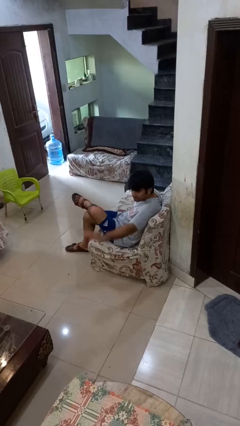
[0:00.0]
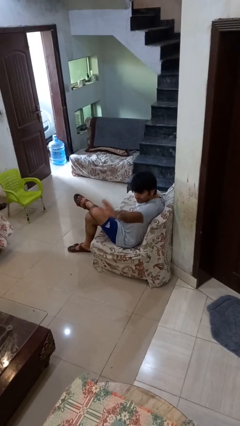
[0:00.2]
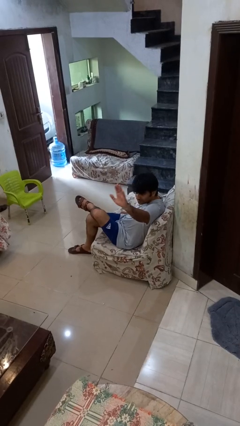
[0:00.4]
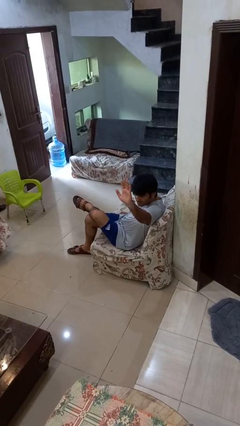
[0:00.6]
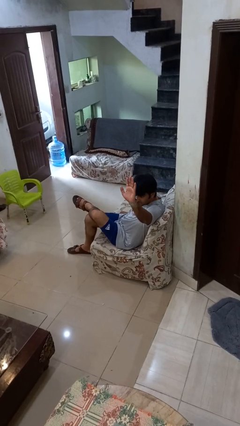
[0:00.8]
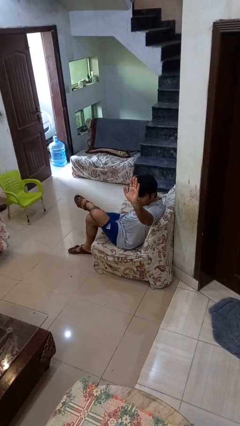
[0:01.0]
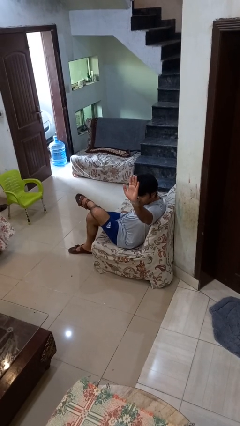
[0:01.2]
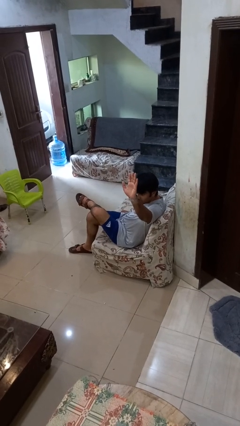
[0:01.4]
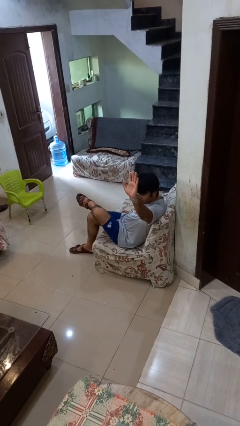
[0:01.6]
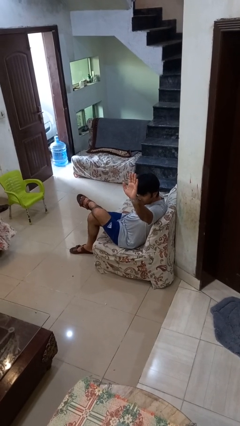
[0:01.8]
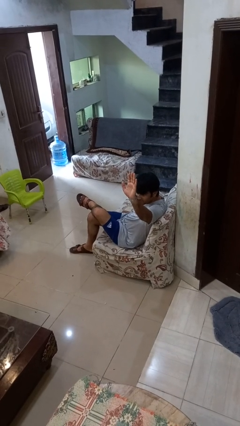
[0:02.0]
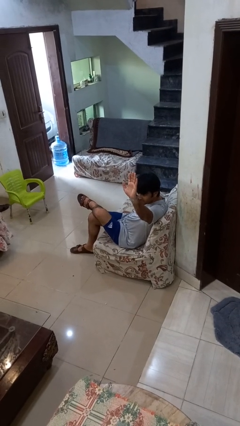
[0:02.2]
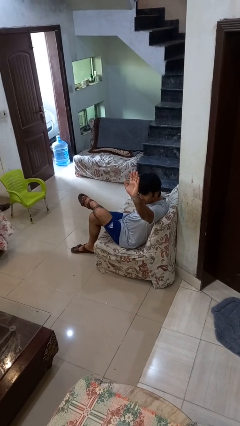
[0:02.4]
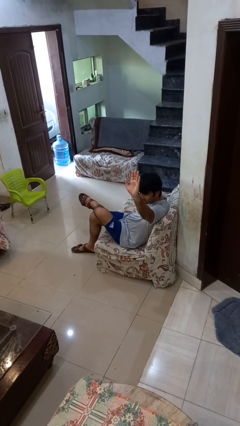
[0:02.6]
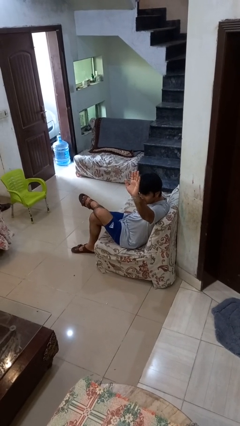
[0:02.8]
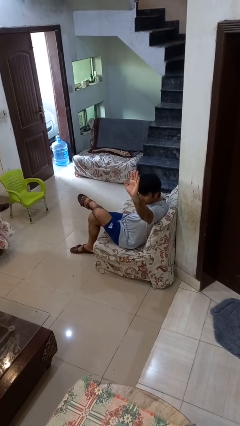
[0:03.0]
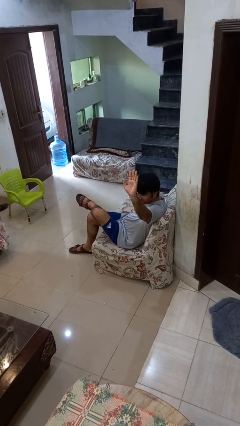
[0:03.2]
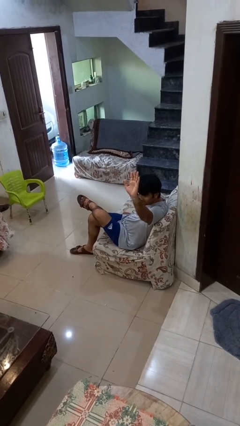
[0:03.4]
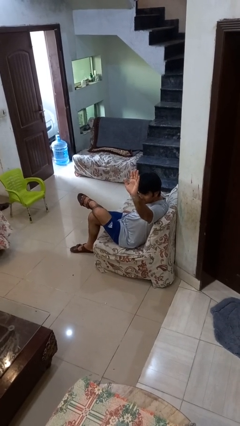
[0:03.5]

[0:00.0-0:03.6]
person gestures raise hand

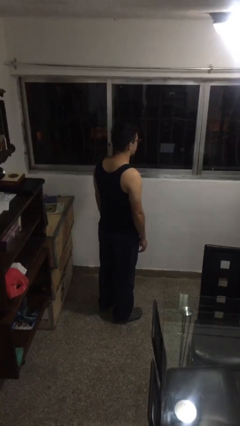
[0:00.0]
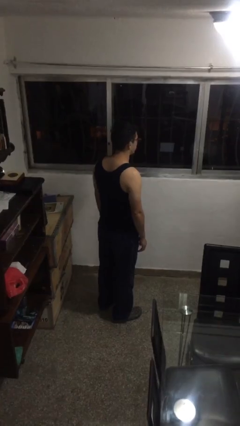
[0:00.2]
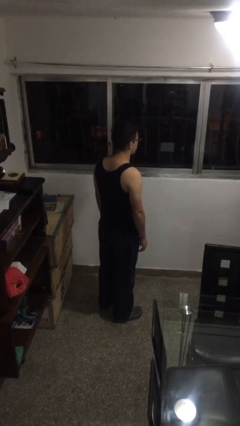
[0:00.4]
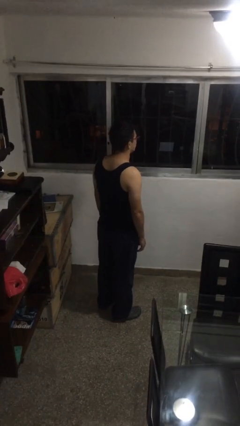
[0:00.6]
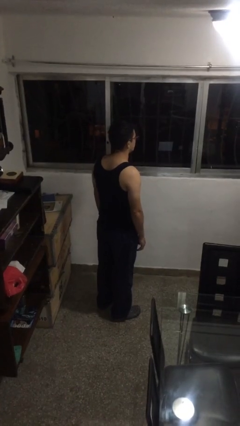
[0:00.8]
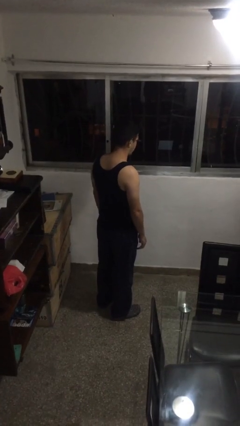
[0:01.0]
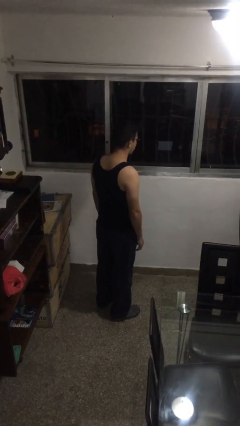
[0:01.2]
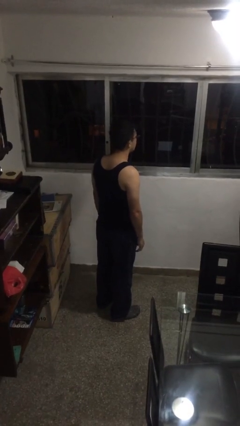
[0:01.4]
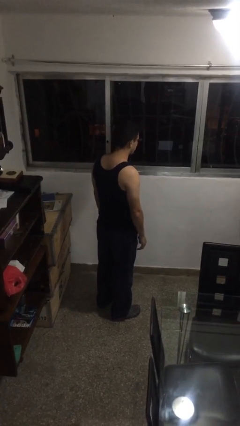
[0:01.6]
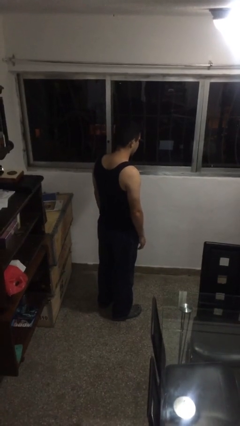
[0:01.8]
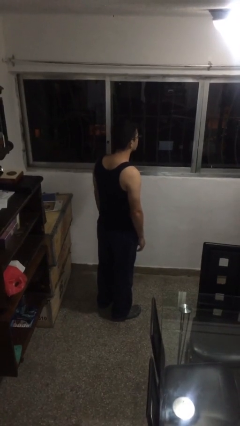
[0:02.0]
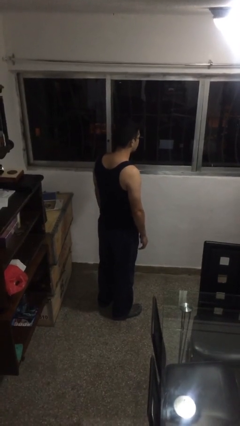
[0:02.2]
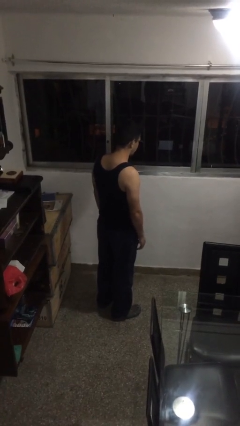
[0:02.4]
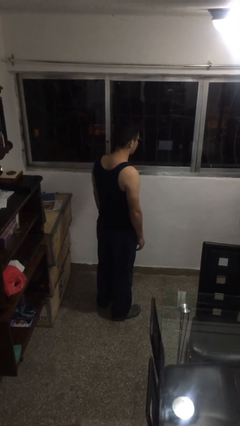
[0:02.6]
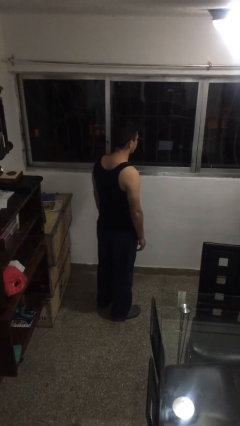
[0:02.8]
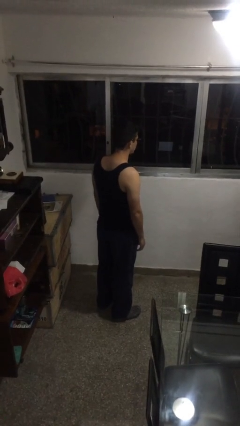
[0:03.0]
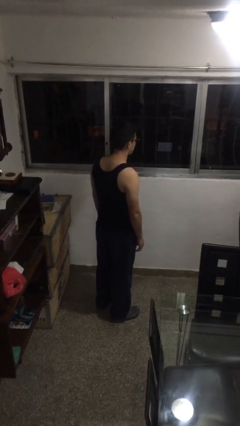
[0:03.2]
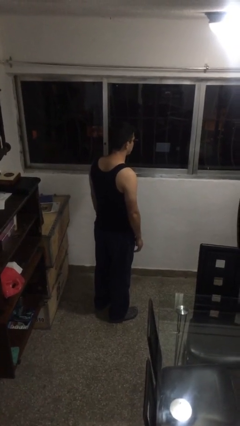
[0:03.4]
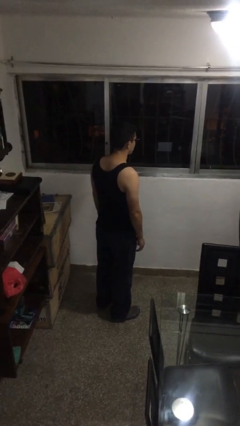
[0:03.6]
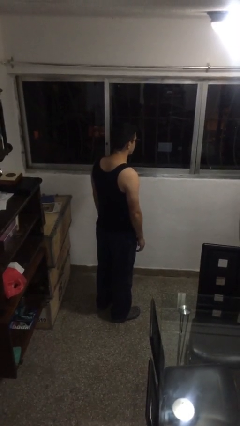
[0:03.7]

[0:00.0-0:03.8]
person nods head

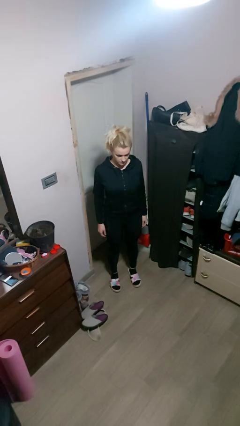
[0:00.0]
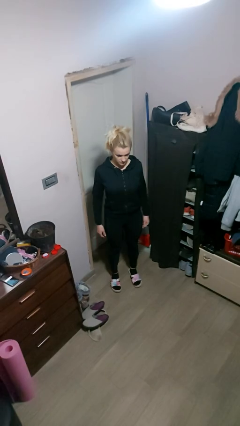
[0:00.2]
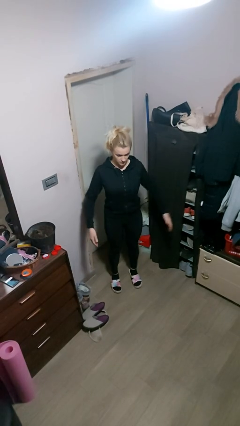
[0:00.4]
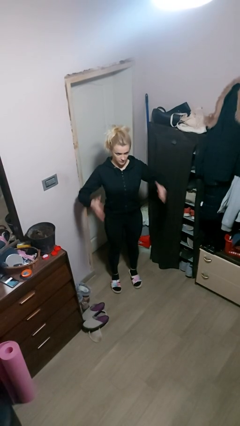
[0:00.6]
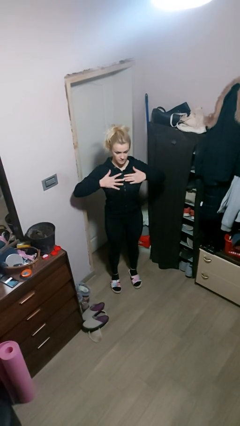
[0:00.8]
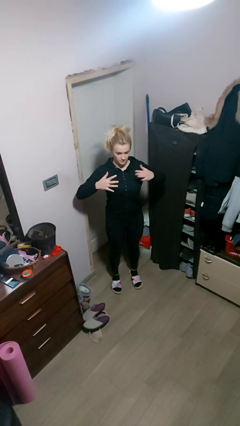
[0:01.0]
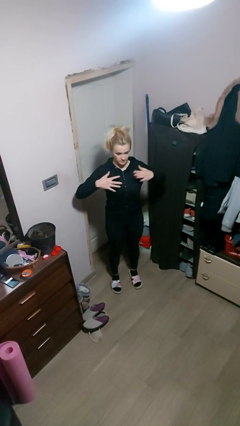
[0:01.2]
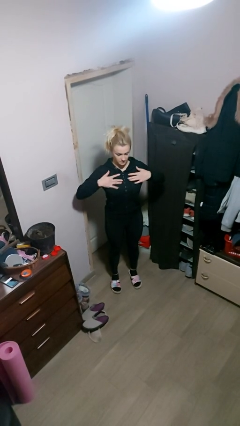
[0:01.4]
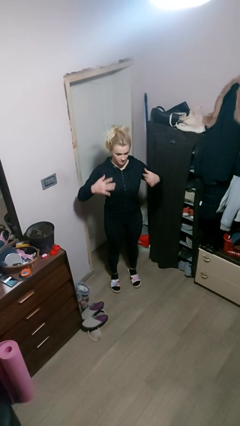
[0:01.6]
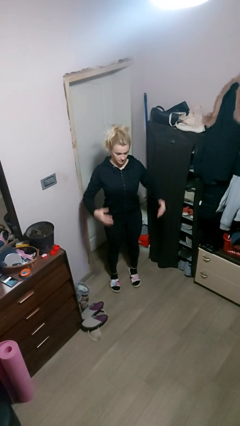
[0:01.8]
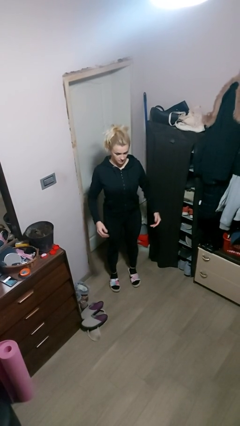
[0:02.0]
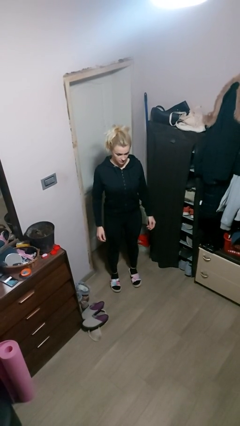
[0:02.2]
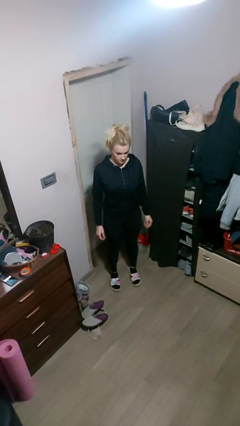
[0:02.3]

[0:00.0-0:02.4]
person drums on chest

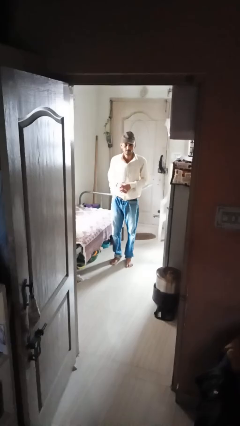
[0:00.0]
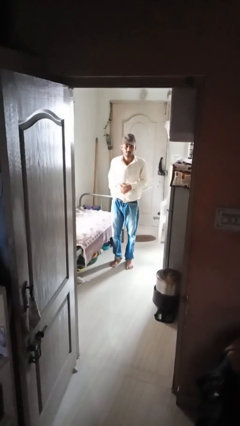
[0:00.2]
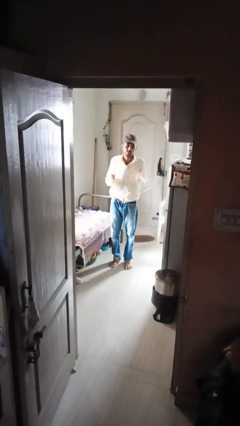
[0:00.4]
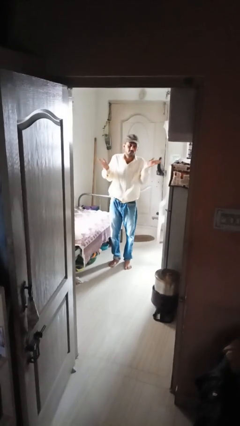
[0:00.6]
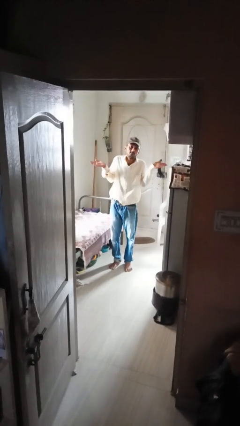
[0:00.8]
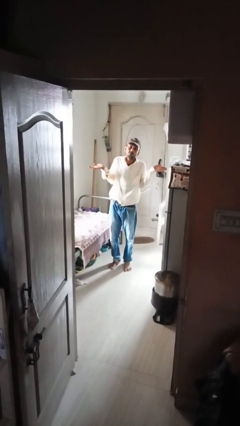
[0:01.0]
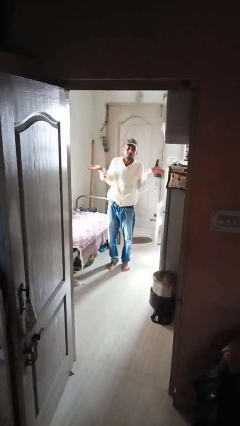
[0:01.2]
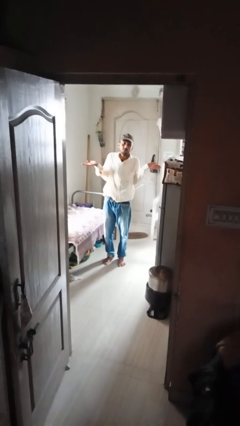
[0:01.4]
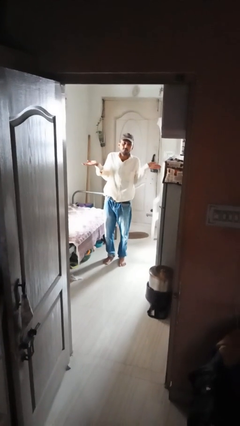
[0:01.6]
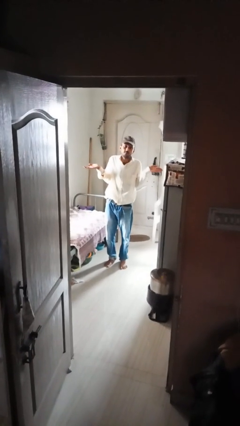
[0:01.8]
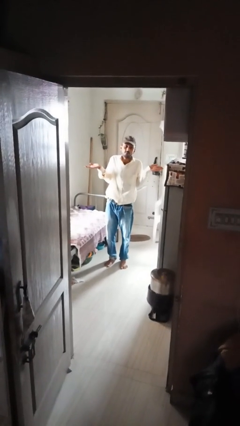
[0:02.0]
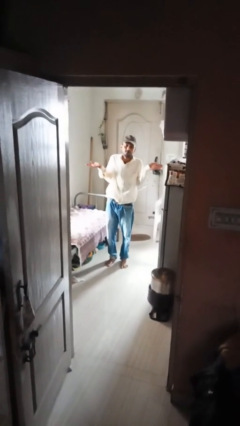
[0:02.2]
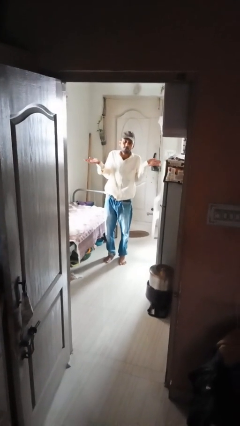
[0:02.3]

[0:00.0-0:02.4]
person shrugs

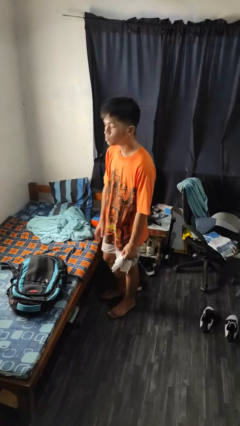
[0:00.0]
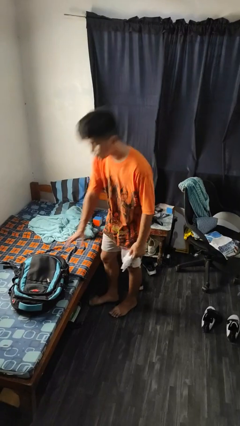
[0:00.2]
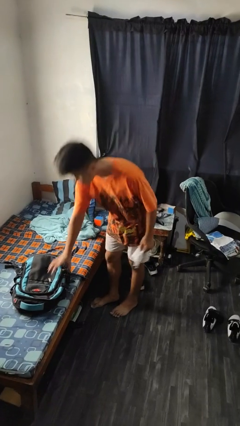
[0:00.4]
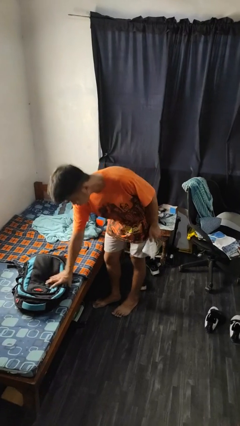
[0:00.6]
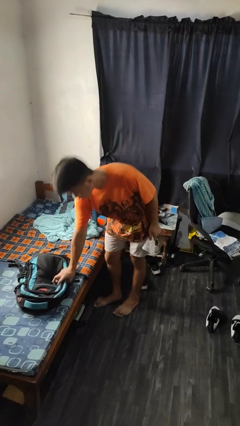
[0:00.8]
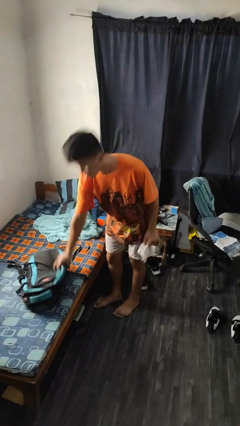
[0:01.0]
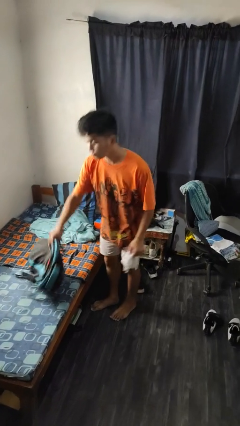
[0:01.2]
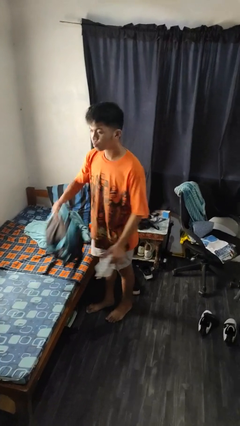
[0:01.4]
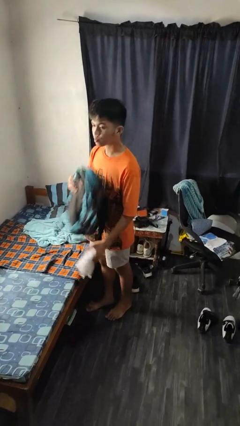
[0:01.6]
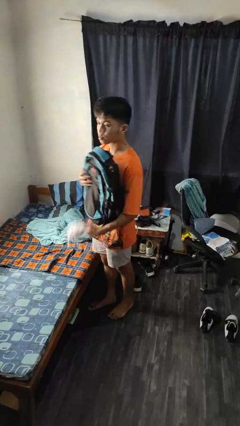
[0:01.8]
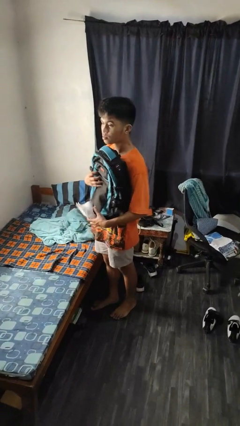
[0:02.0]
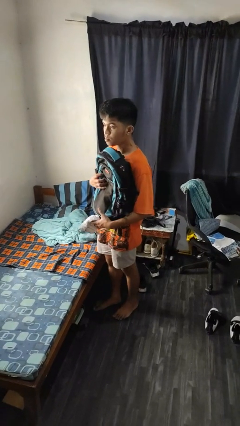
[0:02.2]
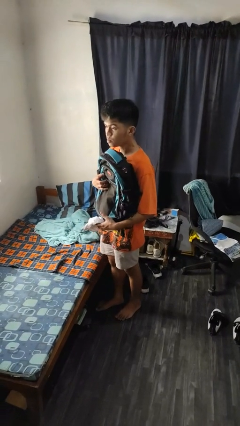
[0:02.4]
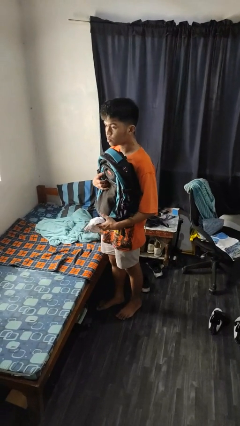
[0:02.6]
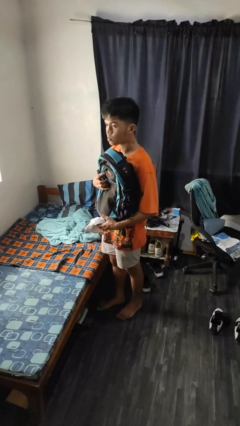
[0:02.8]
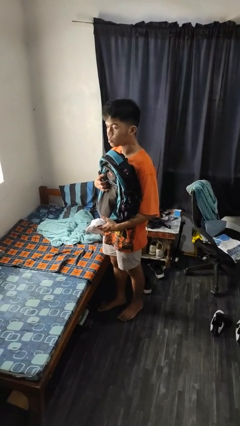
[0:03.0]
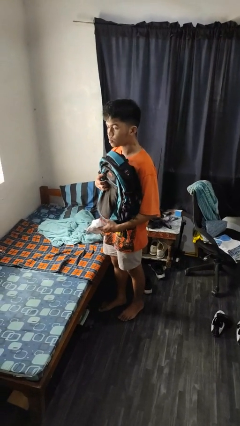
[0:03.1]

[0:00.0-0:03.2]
person picks up object from bed

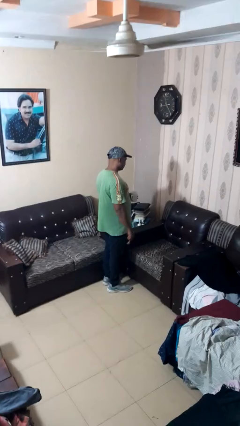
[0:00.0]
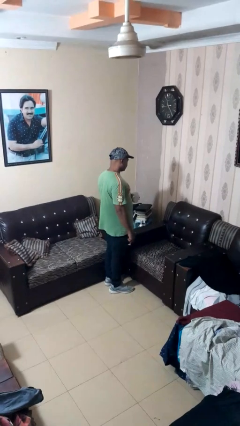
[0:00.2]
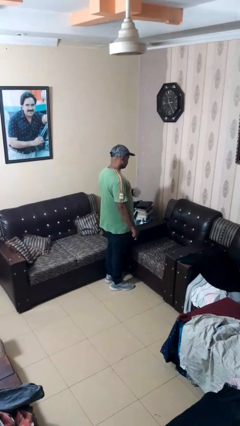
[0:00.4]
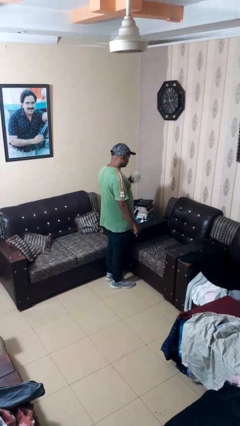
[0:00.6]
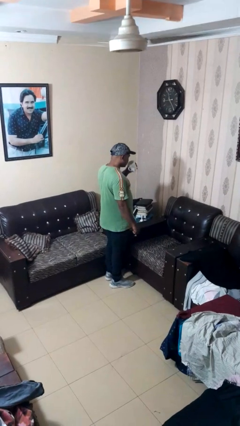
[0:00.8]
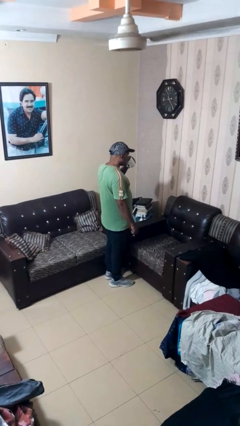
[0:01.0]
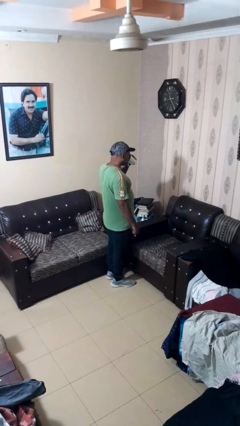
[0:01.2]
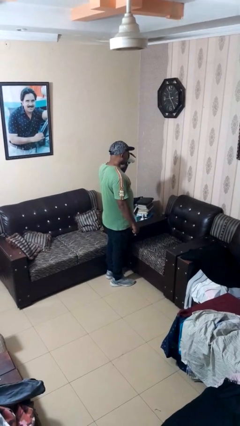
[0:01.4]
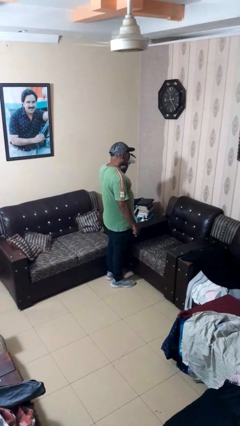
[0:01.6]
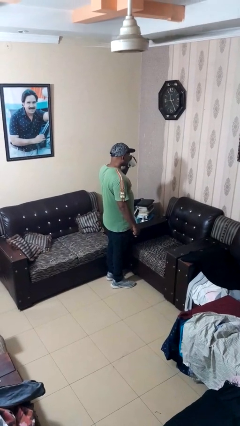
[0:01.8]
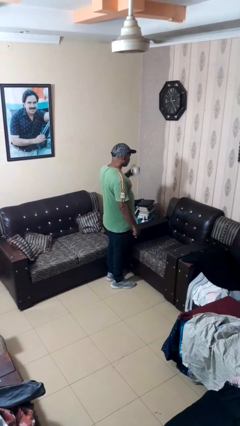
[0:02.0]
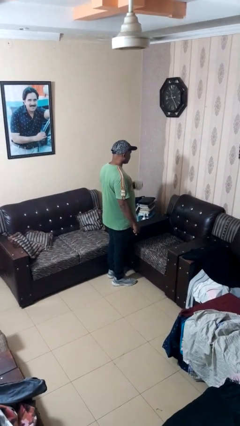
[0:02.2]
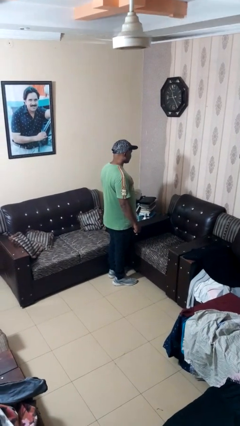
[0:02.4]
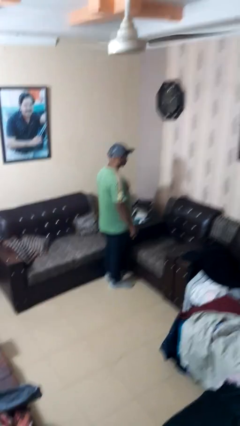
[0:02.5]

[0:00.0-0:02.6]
person drinks from mug
